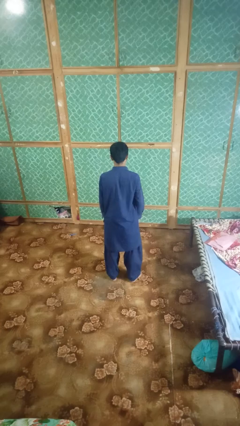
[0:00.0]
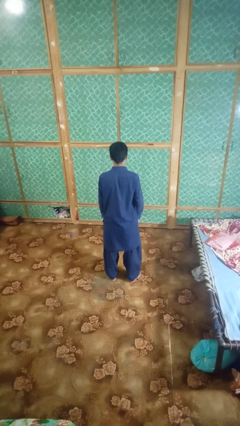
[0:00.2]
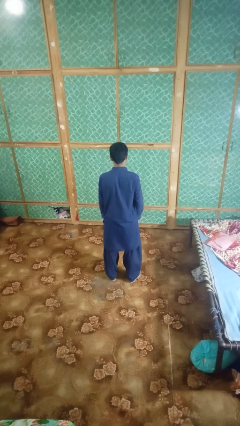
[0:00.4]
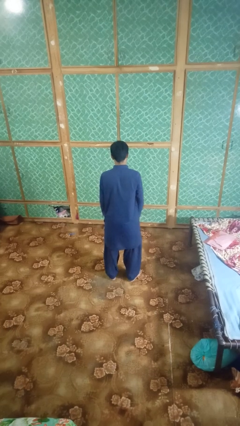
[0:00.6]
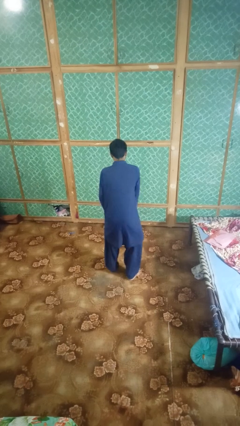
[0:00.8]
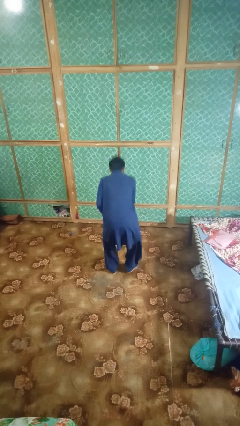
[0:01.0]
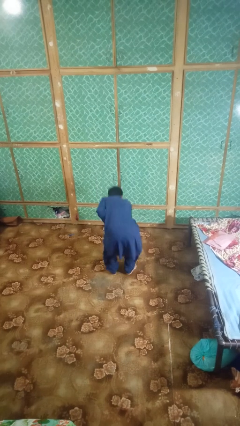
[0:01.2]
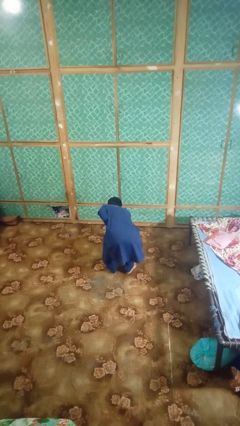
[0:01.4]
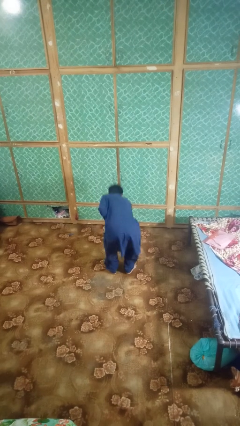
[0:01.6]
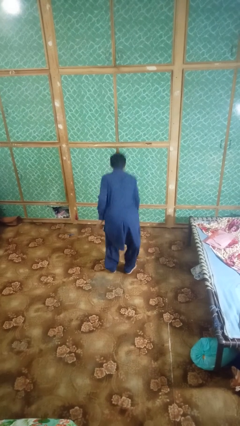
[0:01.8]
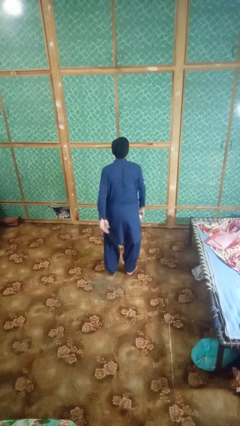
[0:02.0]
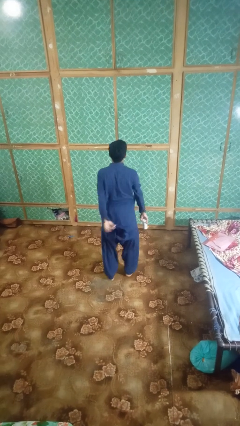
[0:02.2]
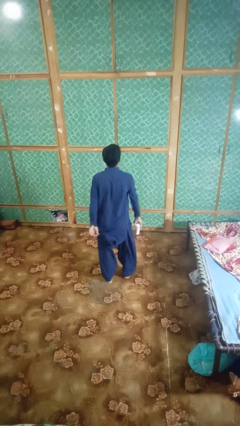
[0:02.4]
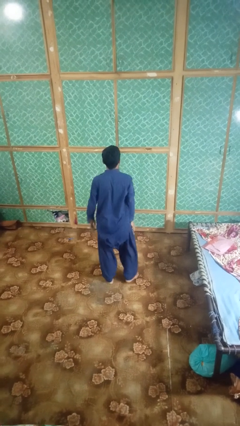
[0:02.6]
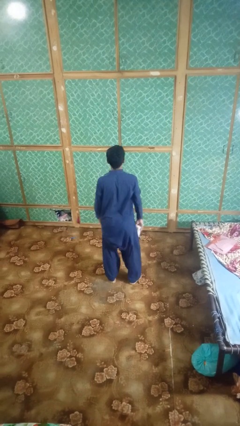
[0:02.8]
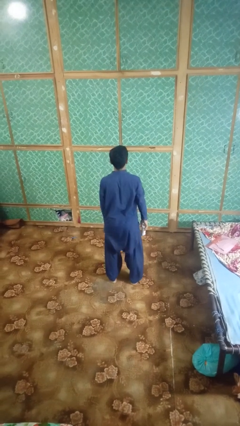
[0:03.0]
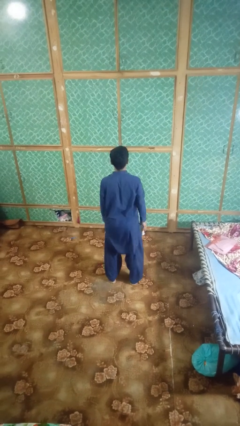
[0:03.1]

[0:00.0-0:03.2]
person picks up object from floor

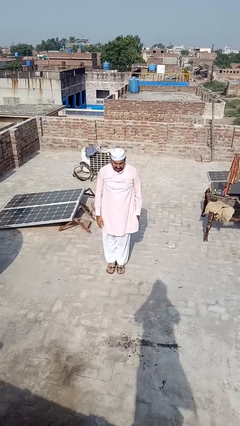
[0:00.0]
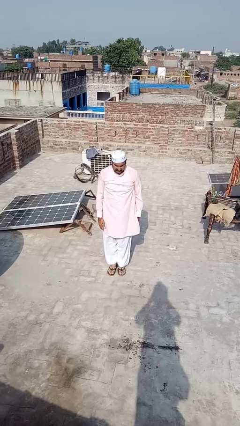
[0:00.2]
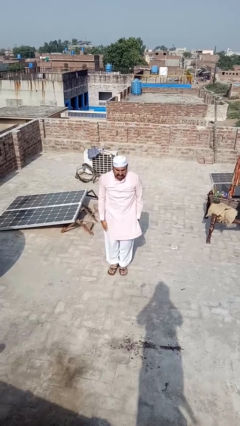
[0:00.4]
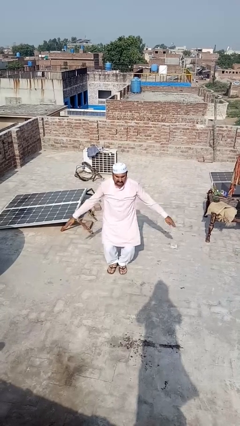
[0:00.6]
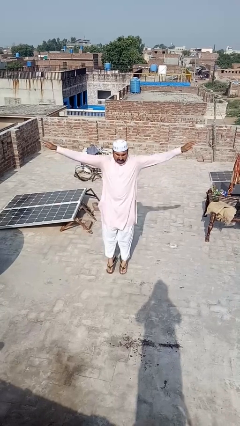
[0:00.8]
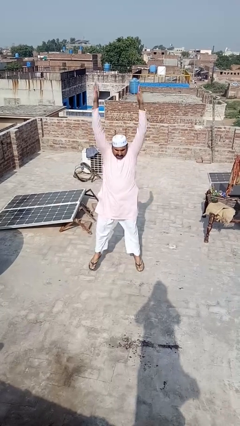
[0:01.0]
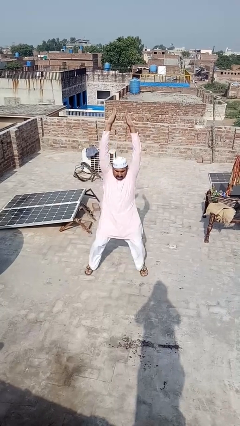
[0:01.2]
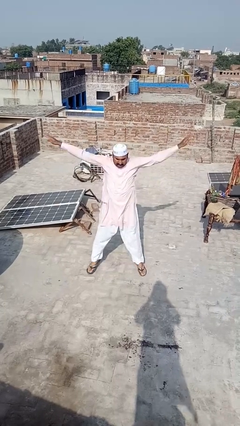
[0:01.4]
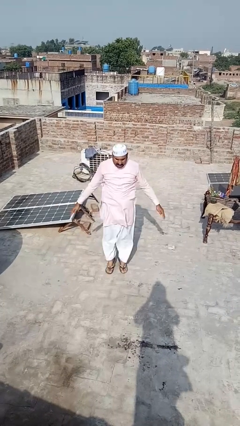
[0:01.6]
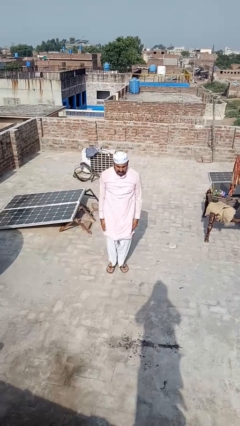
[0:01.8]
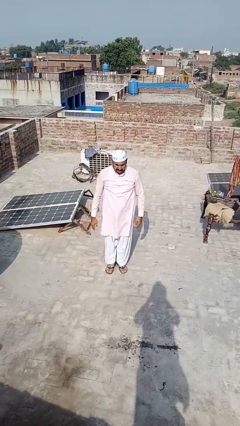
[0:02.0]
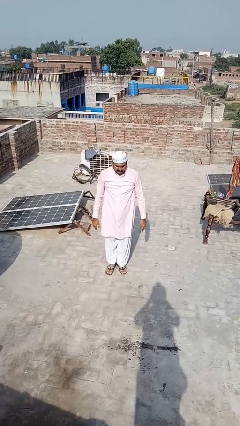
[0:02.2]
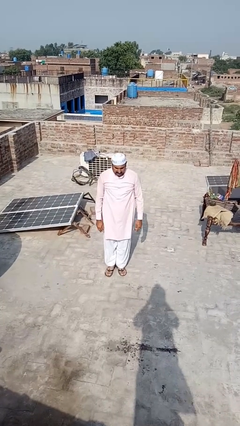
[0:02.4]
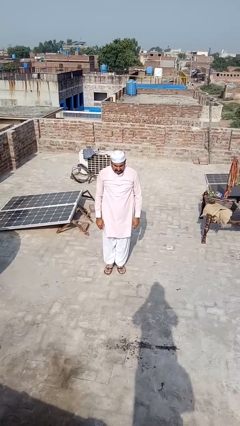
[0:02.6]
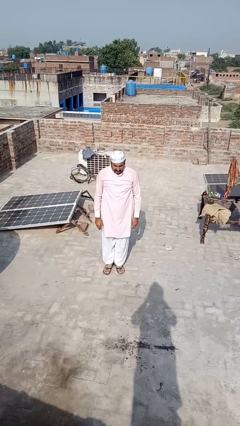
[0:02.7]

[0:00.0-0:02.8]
person exercises with jumping jacks

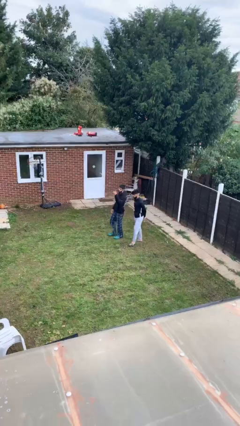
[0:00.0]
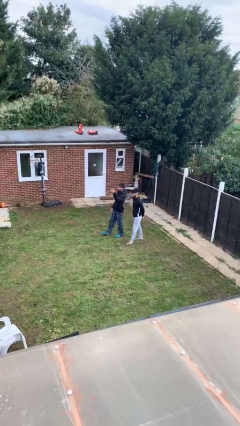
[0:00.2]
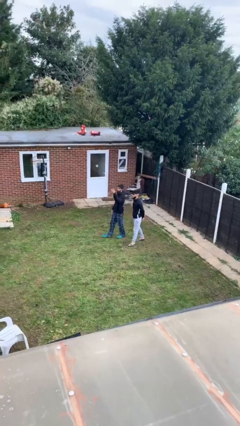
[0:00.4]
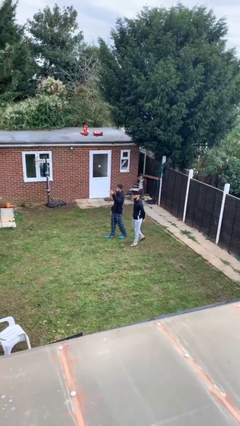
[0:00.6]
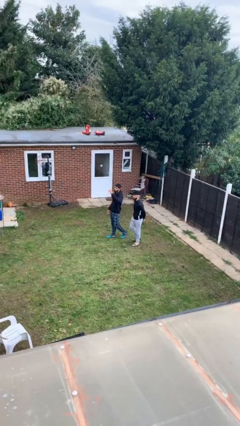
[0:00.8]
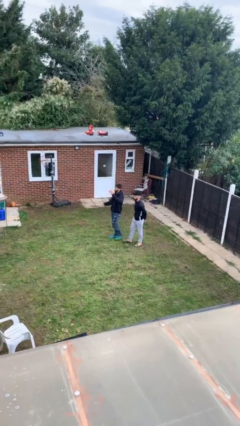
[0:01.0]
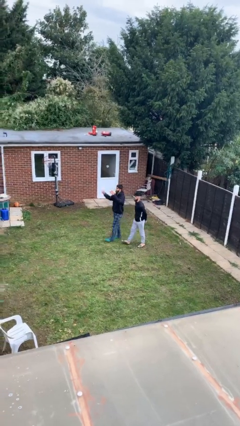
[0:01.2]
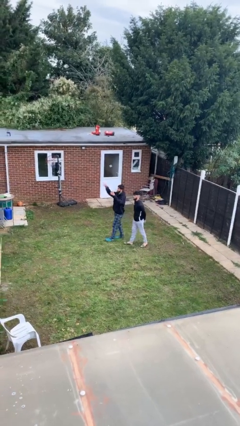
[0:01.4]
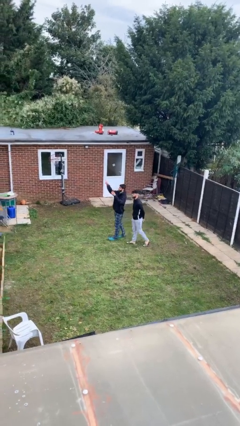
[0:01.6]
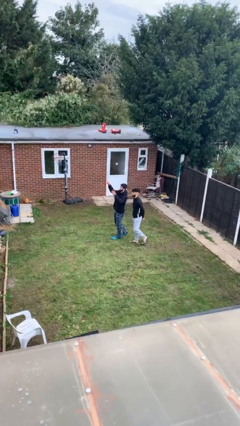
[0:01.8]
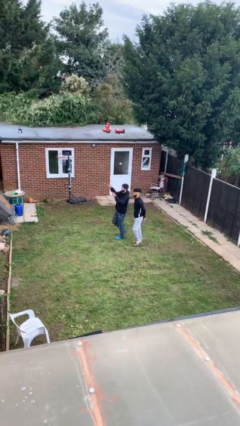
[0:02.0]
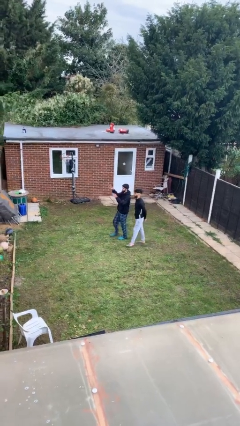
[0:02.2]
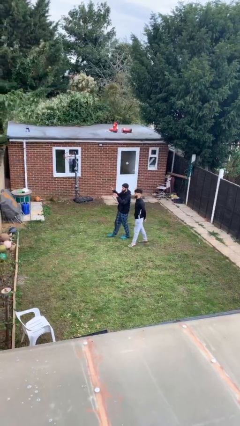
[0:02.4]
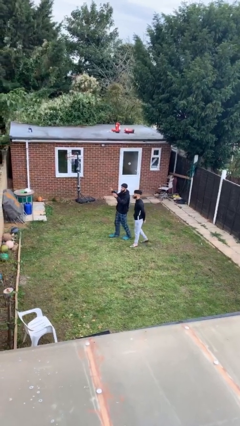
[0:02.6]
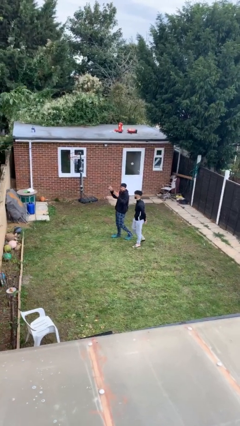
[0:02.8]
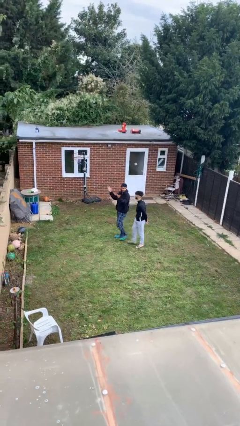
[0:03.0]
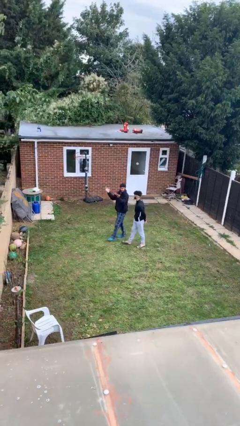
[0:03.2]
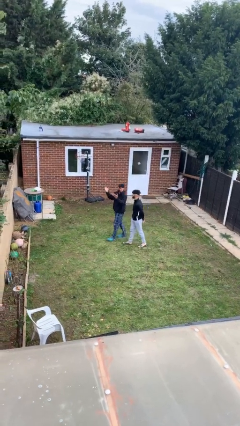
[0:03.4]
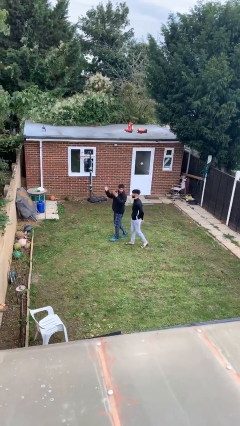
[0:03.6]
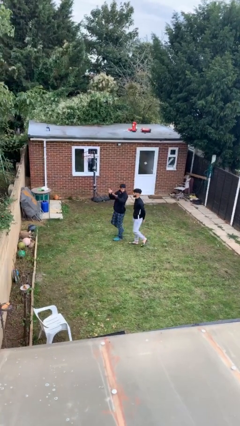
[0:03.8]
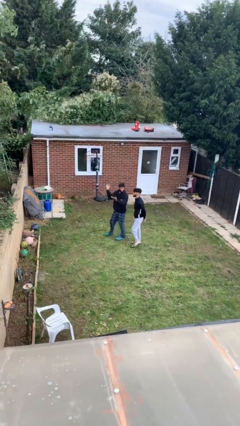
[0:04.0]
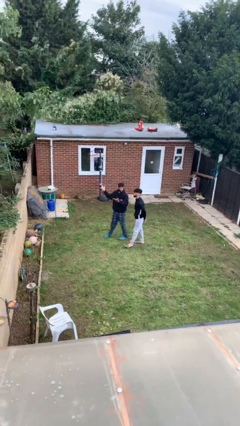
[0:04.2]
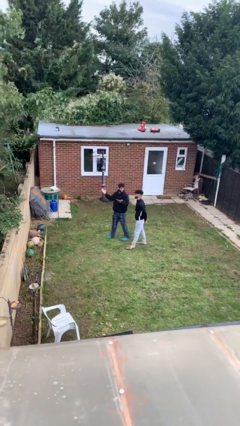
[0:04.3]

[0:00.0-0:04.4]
person talks to person

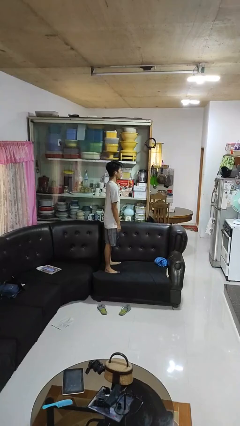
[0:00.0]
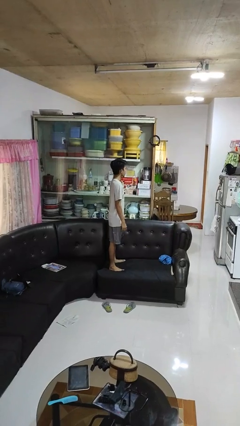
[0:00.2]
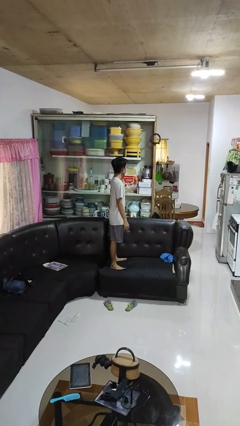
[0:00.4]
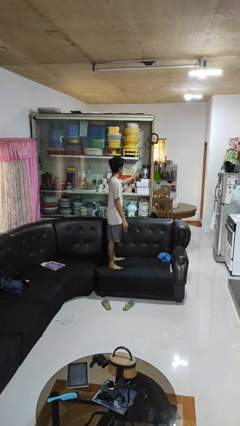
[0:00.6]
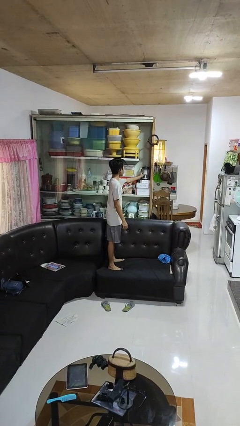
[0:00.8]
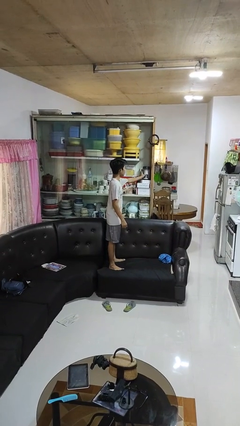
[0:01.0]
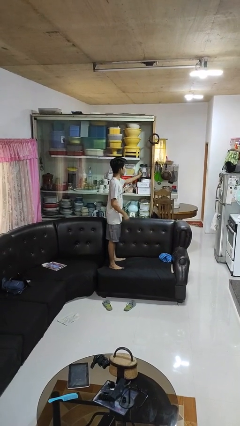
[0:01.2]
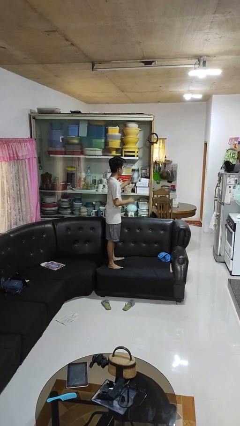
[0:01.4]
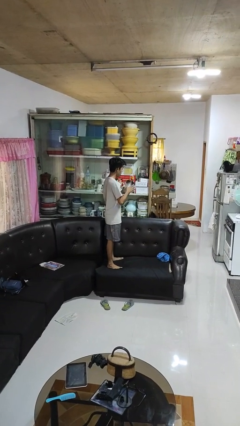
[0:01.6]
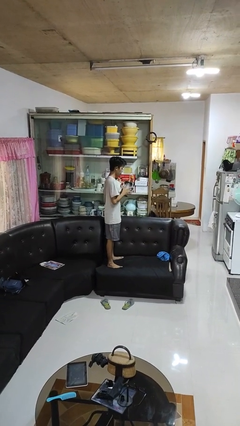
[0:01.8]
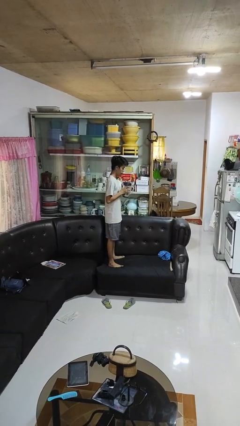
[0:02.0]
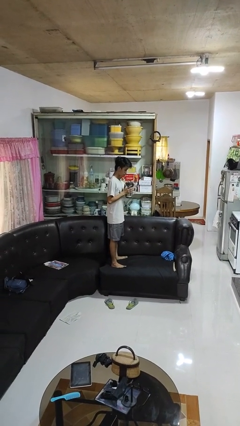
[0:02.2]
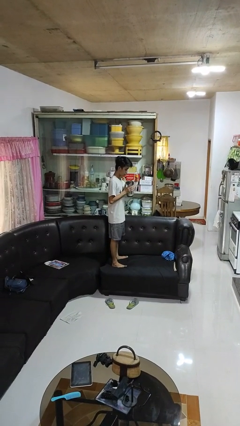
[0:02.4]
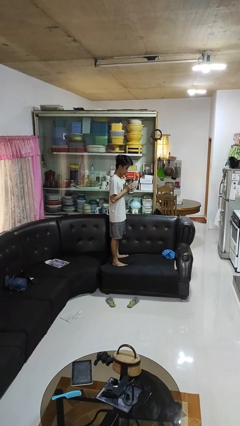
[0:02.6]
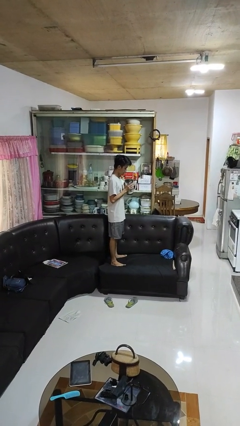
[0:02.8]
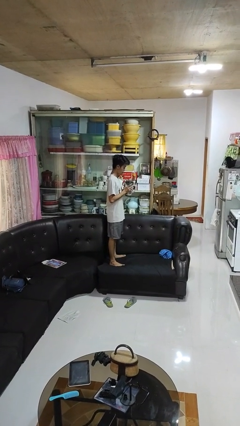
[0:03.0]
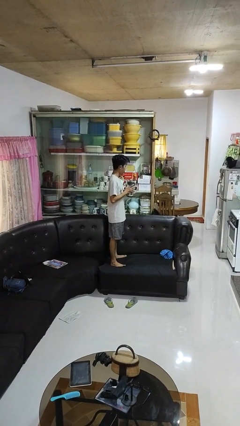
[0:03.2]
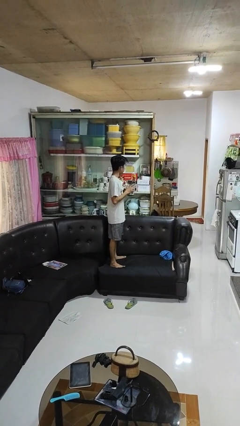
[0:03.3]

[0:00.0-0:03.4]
person picks up object from cabinet

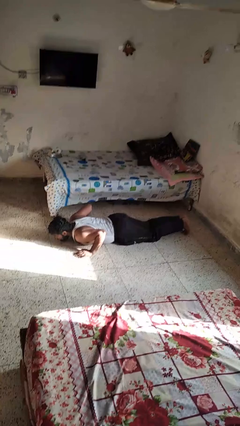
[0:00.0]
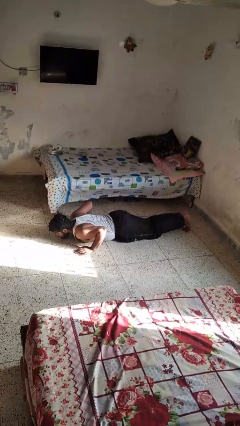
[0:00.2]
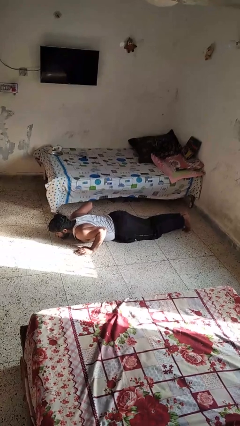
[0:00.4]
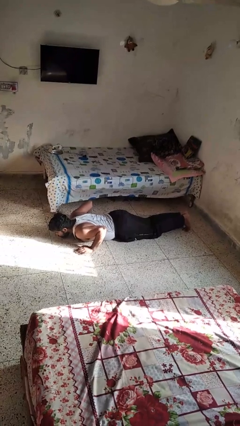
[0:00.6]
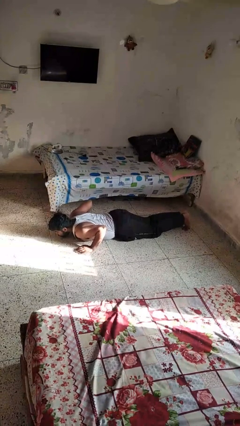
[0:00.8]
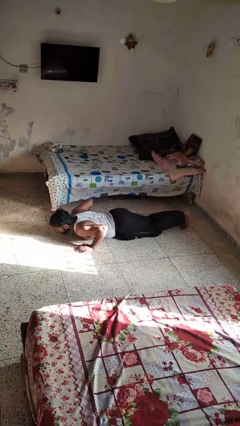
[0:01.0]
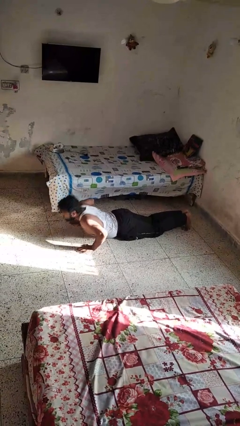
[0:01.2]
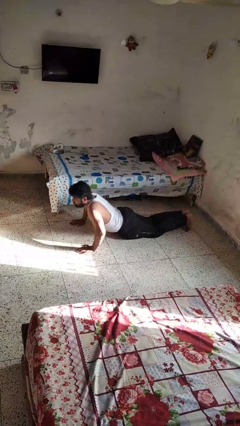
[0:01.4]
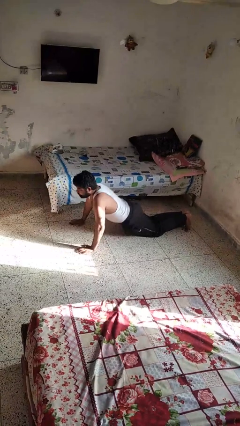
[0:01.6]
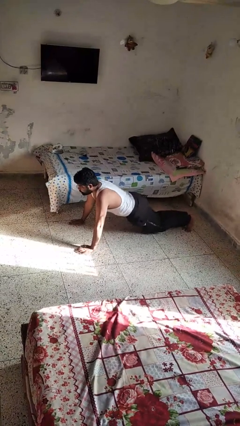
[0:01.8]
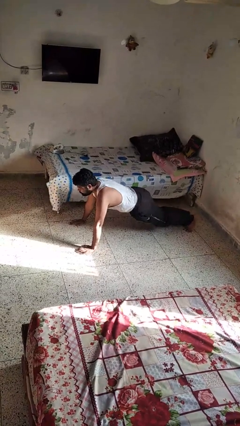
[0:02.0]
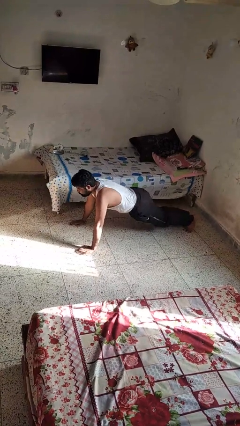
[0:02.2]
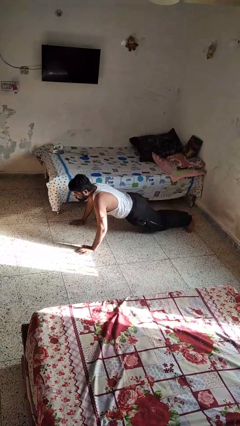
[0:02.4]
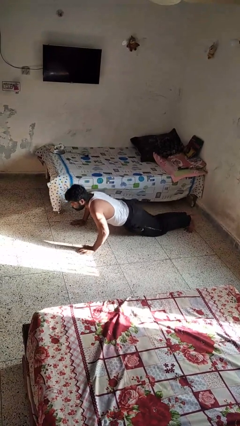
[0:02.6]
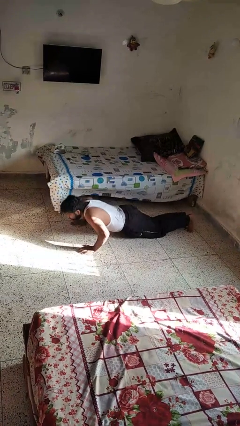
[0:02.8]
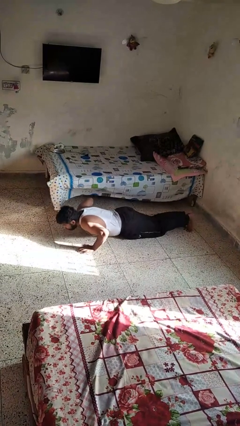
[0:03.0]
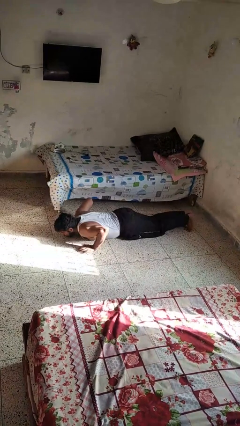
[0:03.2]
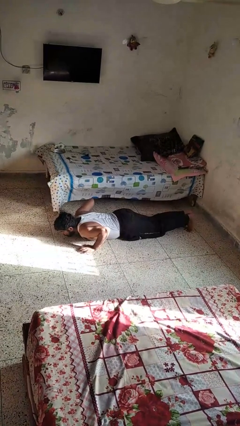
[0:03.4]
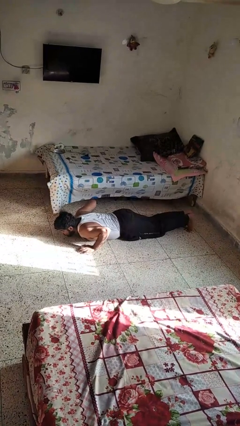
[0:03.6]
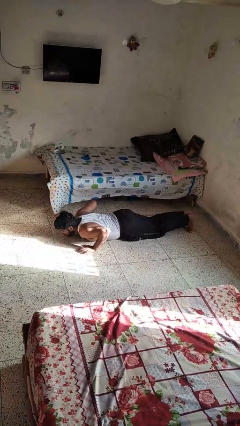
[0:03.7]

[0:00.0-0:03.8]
person exercises with pushup
